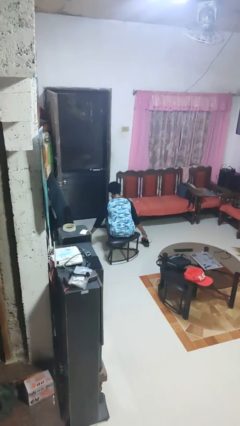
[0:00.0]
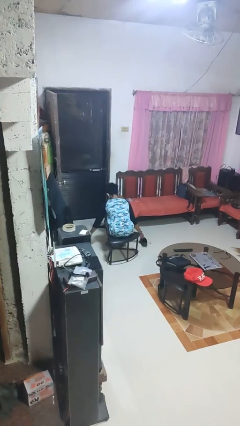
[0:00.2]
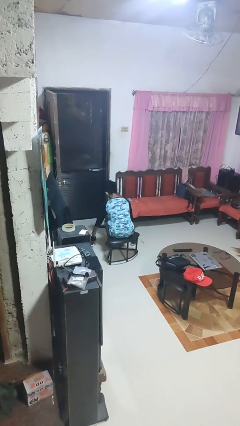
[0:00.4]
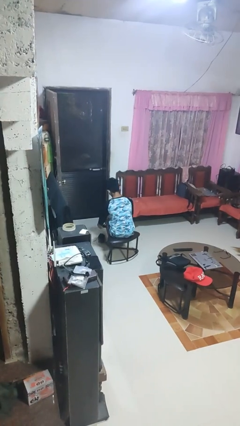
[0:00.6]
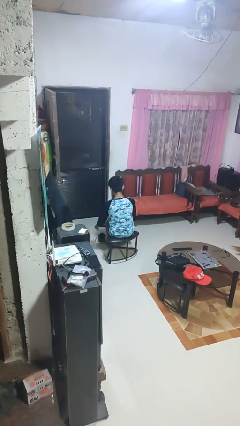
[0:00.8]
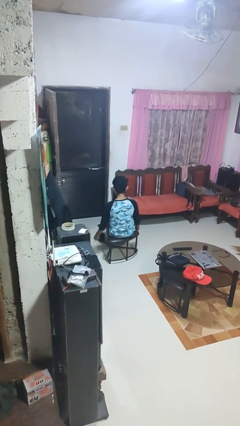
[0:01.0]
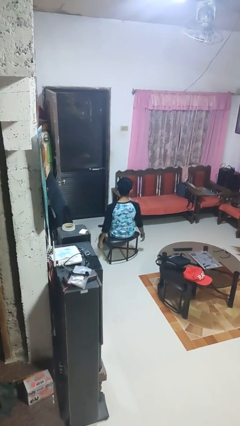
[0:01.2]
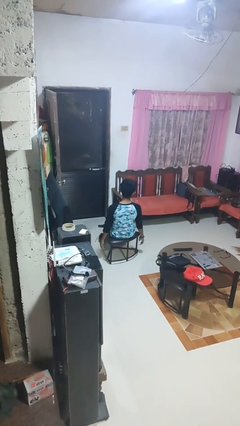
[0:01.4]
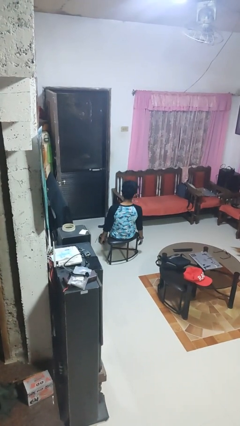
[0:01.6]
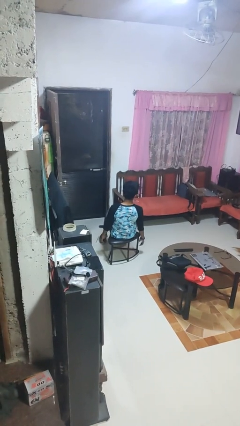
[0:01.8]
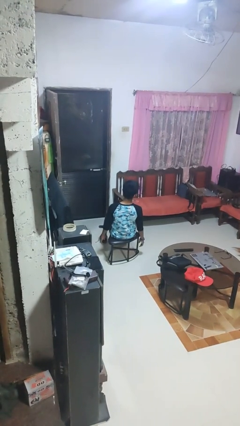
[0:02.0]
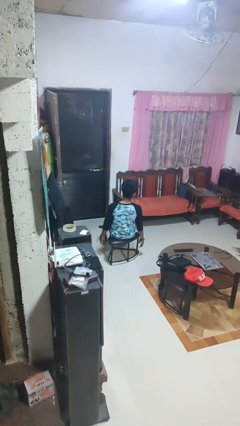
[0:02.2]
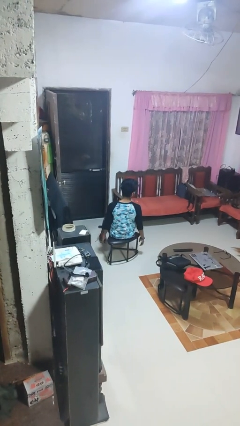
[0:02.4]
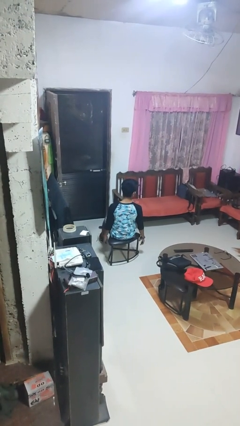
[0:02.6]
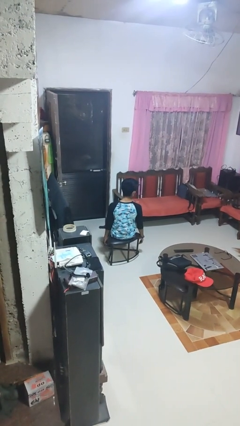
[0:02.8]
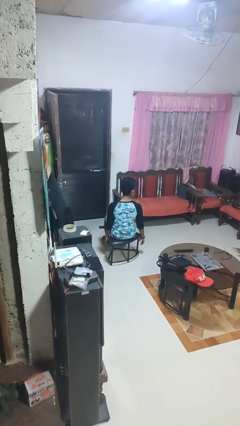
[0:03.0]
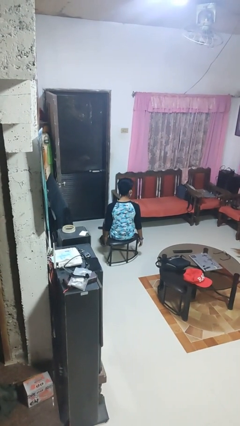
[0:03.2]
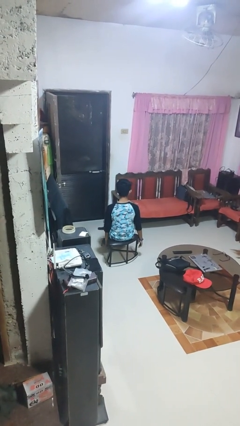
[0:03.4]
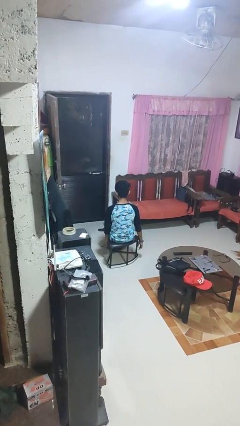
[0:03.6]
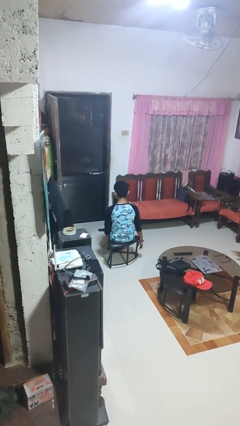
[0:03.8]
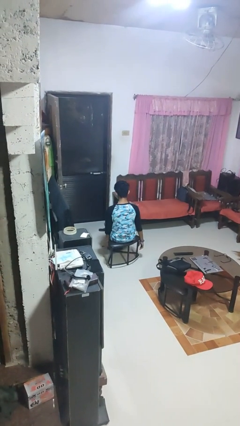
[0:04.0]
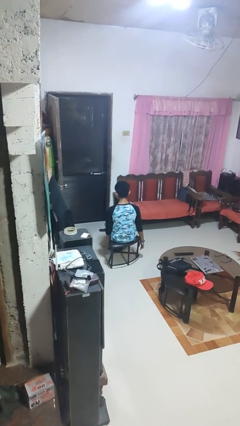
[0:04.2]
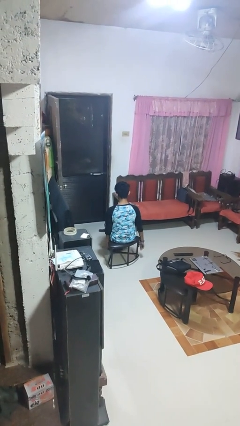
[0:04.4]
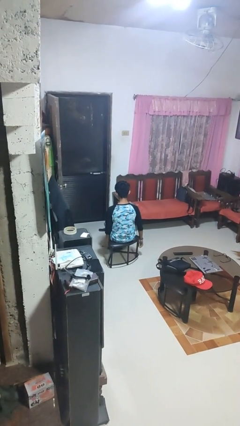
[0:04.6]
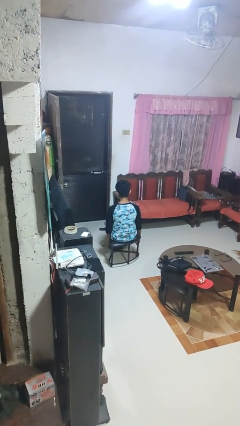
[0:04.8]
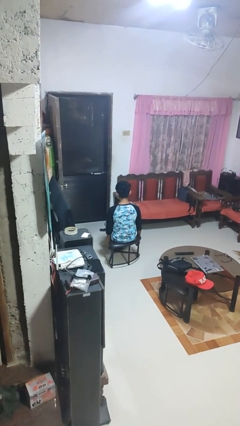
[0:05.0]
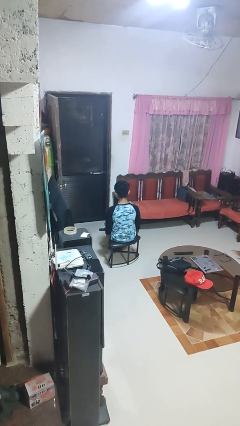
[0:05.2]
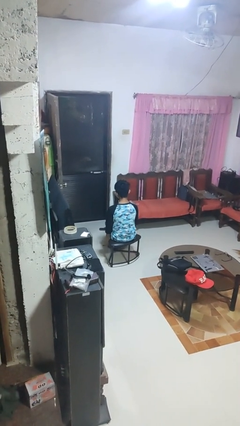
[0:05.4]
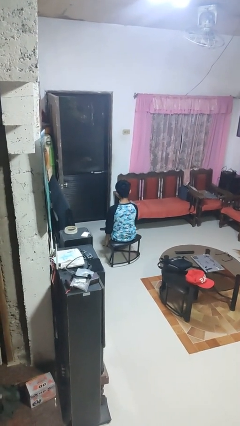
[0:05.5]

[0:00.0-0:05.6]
person puts on shoes

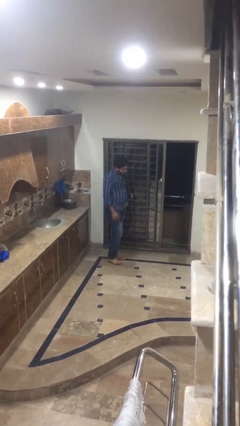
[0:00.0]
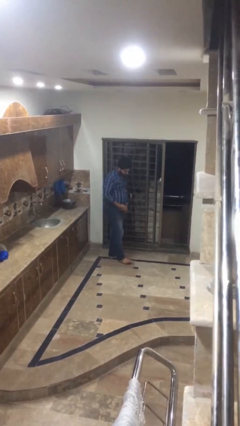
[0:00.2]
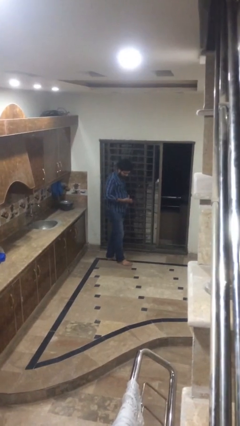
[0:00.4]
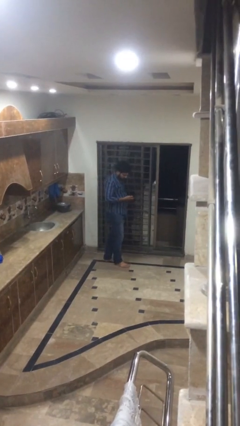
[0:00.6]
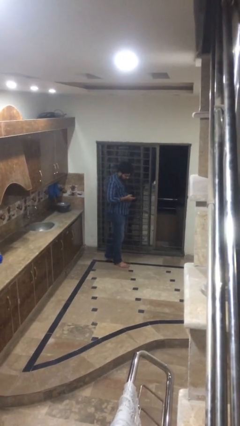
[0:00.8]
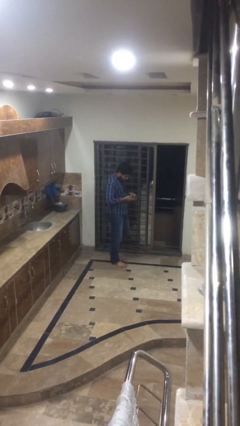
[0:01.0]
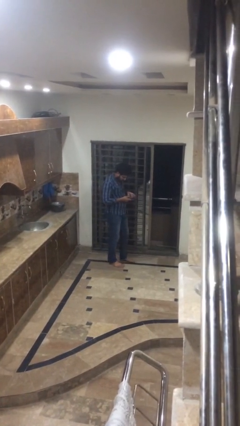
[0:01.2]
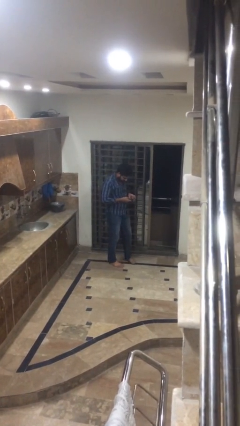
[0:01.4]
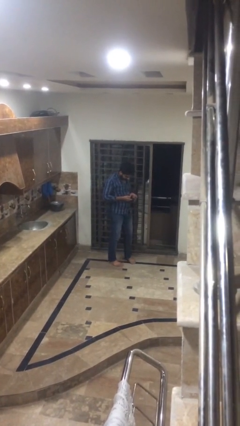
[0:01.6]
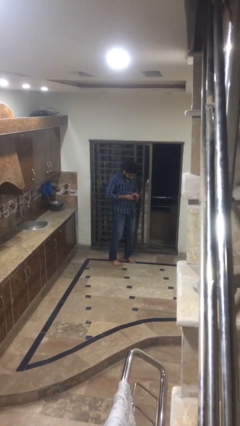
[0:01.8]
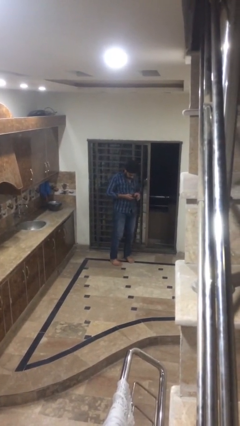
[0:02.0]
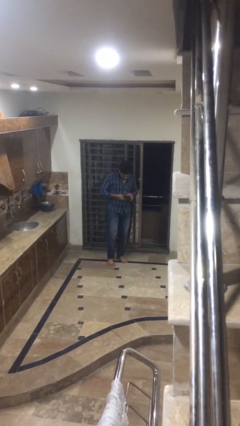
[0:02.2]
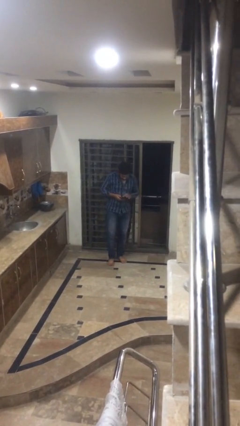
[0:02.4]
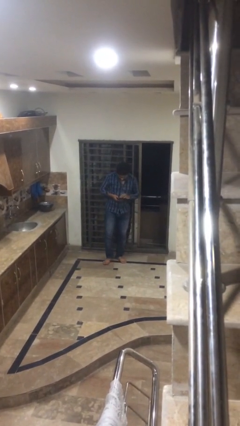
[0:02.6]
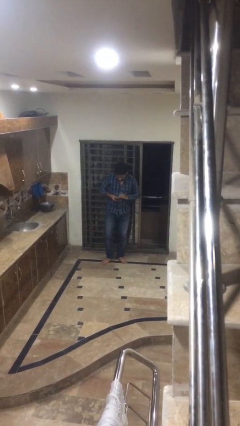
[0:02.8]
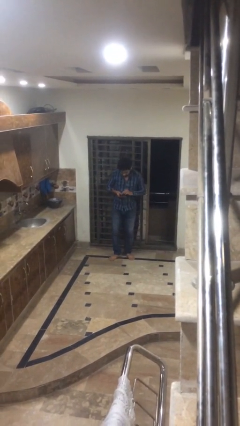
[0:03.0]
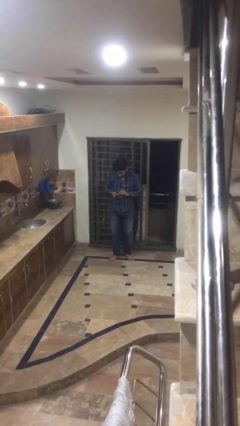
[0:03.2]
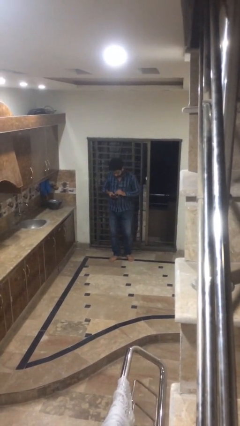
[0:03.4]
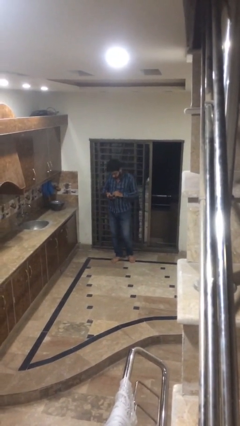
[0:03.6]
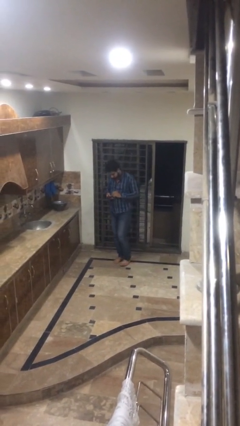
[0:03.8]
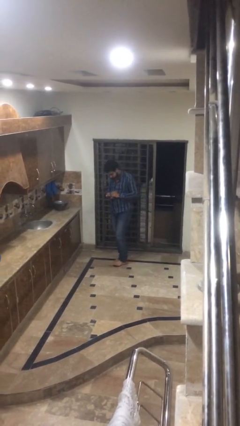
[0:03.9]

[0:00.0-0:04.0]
person texts on phone

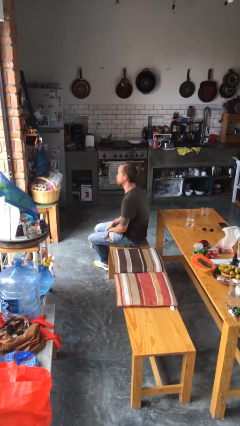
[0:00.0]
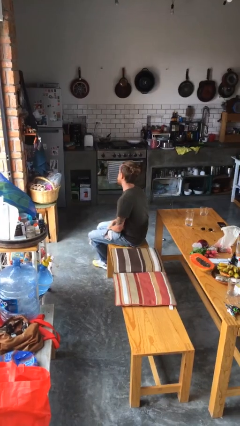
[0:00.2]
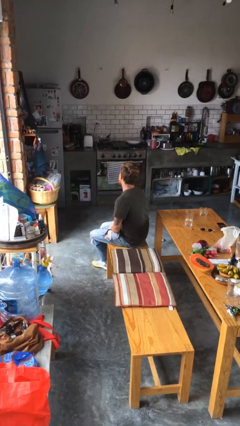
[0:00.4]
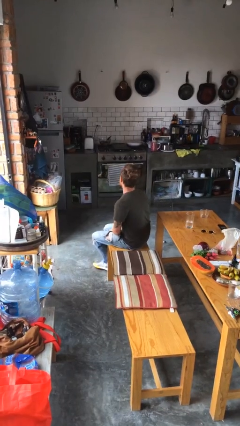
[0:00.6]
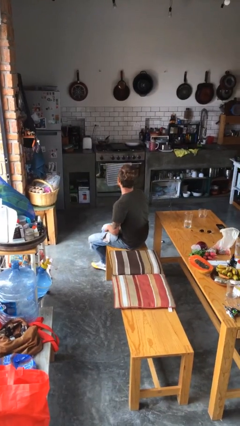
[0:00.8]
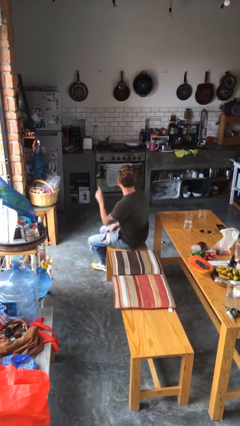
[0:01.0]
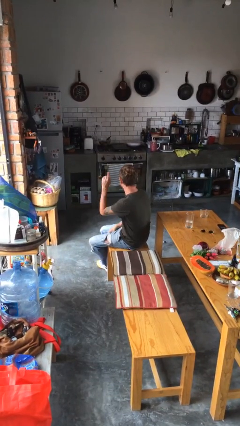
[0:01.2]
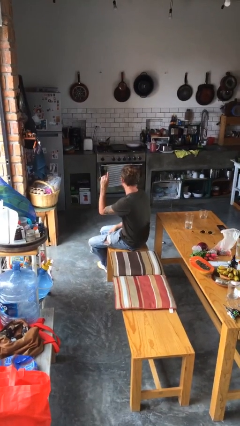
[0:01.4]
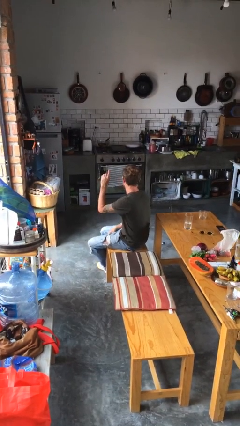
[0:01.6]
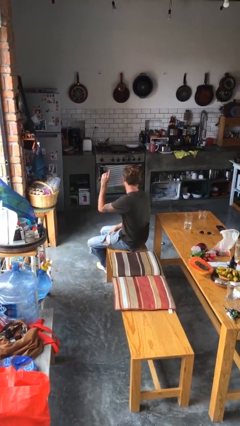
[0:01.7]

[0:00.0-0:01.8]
person gestures raise hand

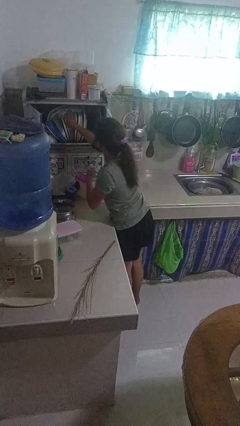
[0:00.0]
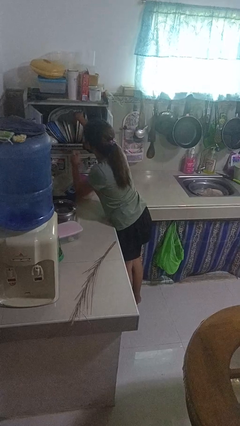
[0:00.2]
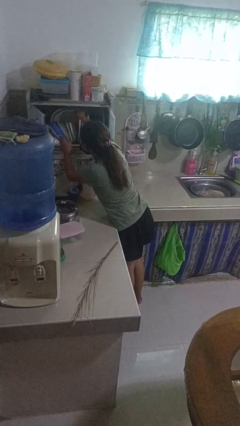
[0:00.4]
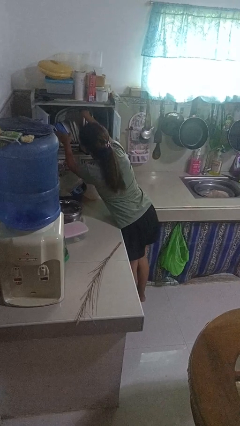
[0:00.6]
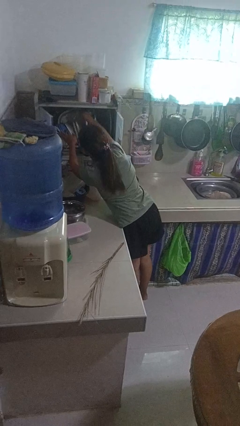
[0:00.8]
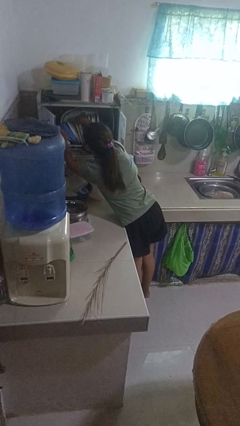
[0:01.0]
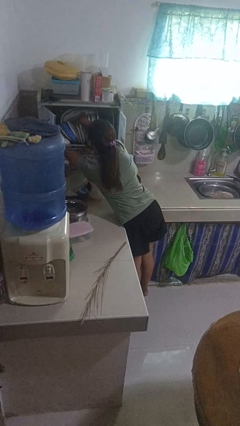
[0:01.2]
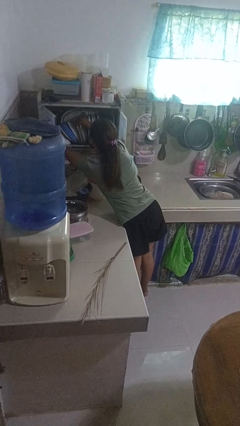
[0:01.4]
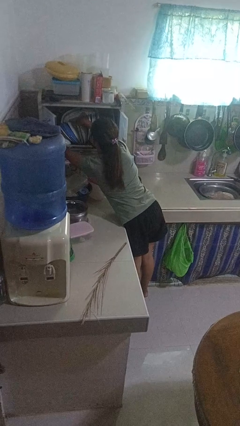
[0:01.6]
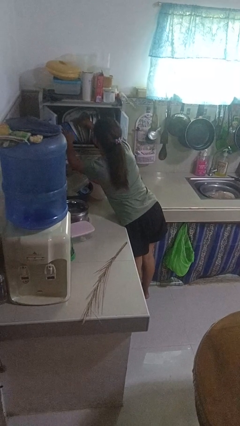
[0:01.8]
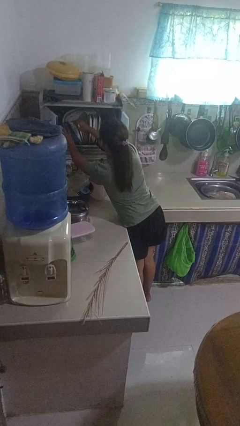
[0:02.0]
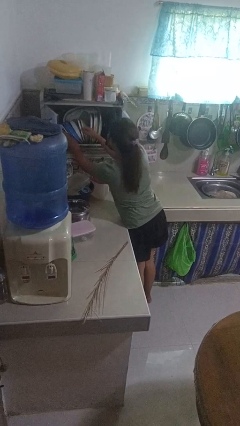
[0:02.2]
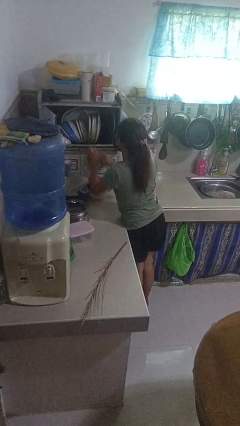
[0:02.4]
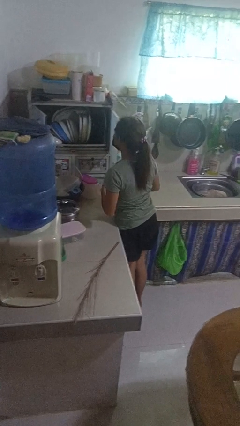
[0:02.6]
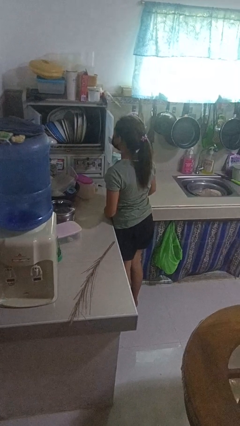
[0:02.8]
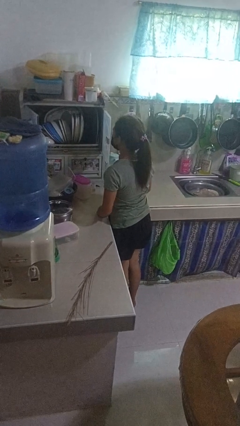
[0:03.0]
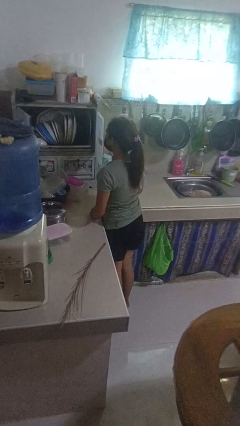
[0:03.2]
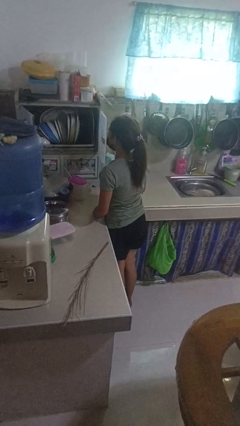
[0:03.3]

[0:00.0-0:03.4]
person searches in kitchen drawer

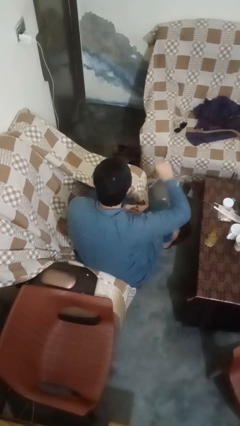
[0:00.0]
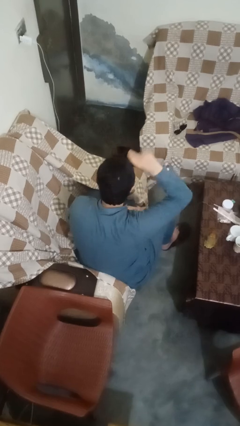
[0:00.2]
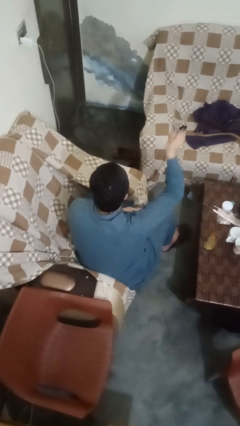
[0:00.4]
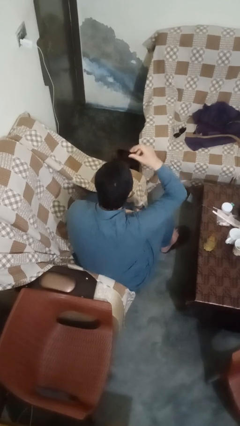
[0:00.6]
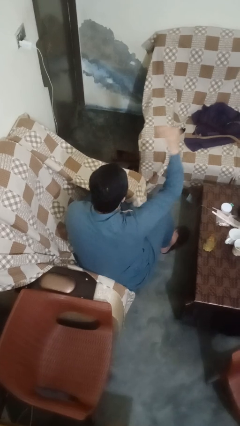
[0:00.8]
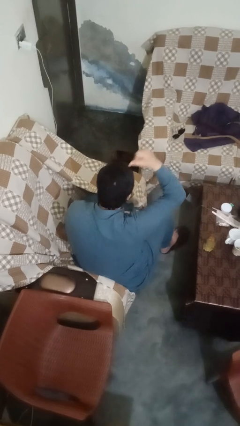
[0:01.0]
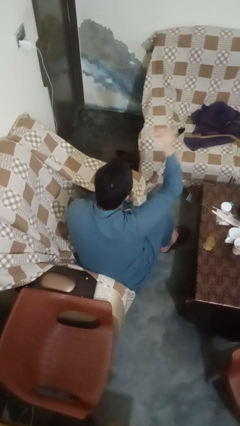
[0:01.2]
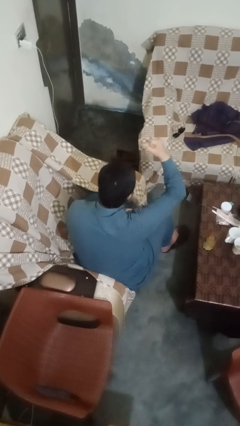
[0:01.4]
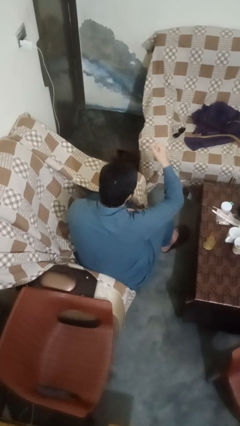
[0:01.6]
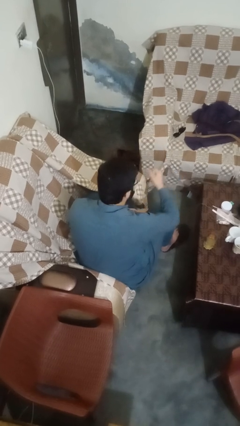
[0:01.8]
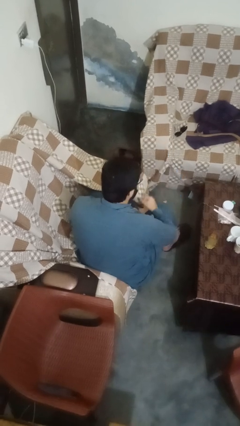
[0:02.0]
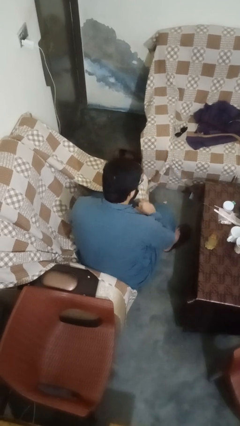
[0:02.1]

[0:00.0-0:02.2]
person snaps fingers
